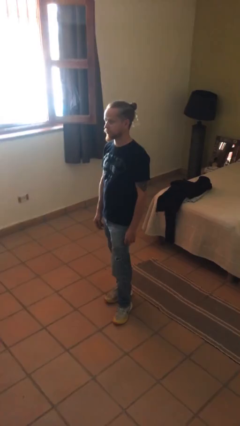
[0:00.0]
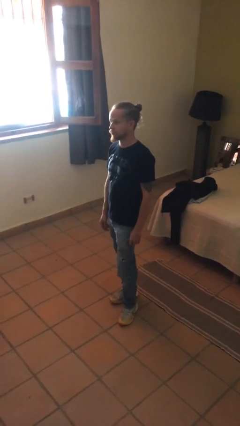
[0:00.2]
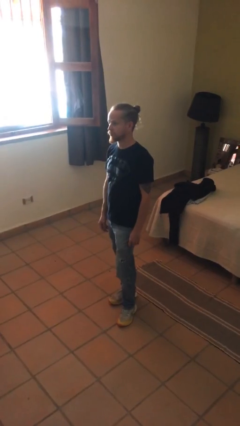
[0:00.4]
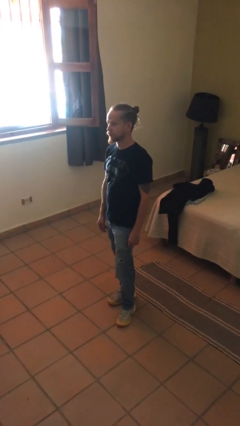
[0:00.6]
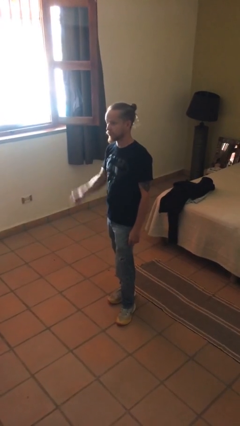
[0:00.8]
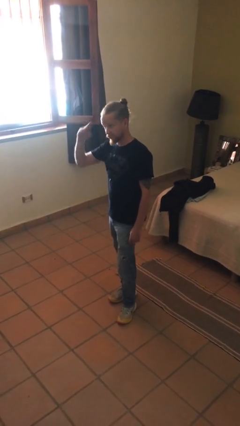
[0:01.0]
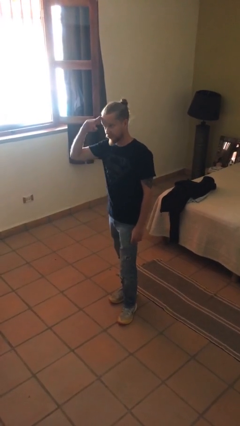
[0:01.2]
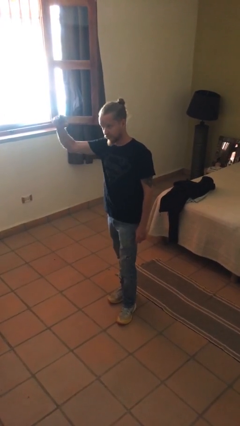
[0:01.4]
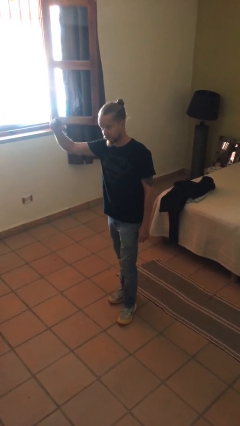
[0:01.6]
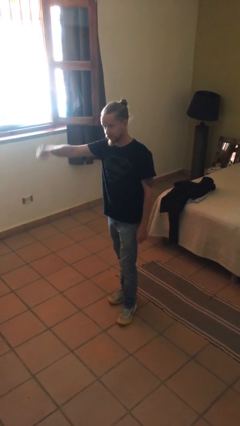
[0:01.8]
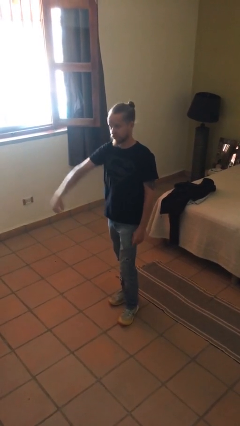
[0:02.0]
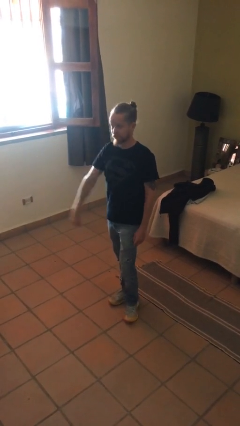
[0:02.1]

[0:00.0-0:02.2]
person salutes

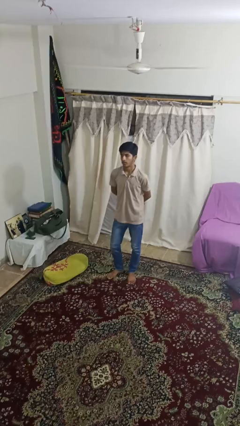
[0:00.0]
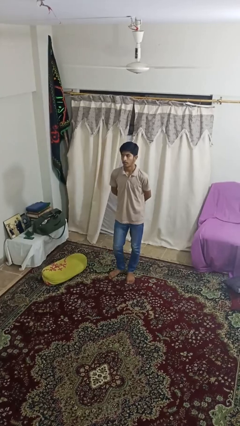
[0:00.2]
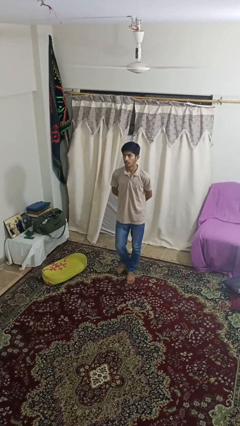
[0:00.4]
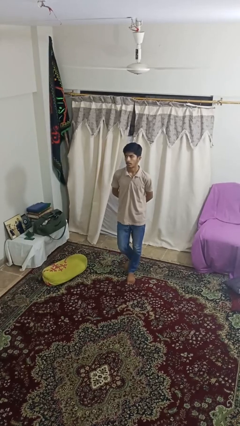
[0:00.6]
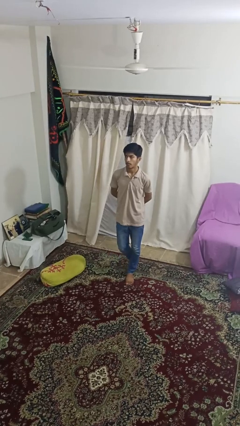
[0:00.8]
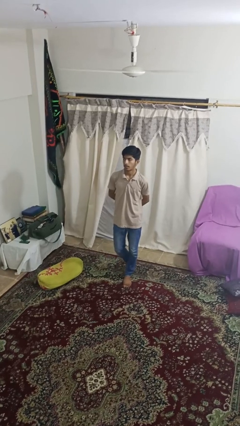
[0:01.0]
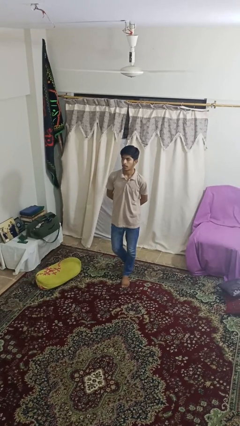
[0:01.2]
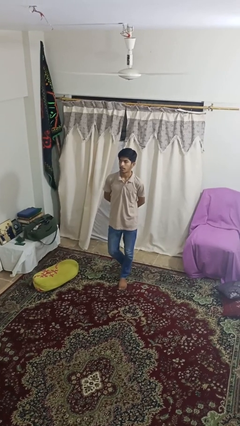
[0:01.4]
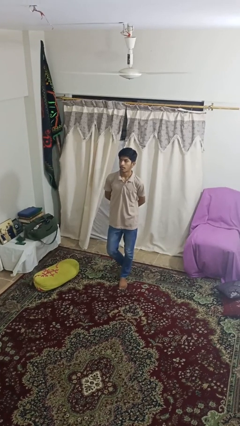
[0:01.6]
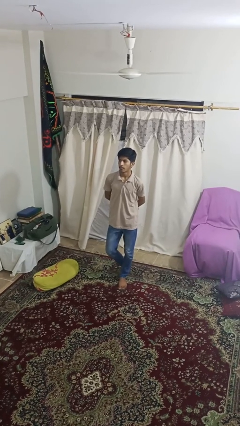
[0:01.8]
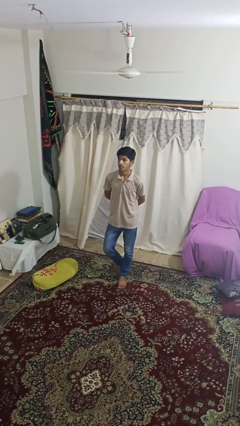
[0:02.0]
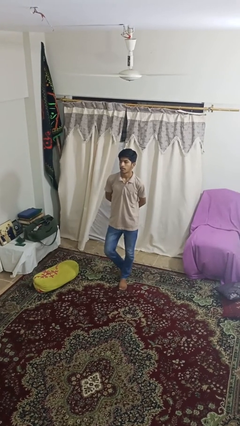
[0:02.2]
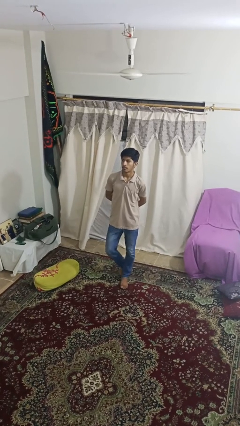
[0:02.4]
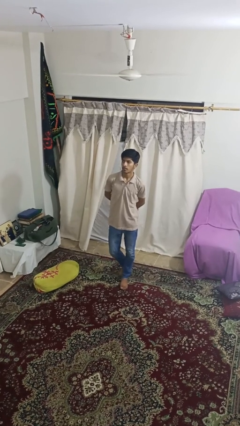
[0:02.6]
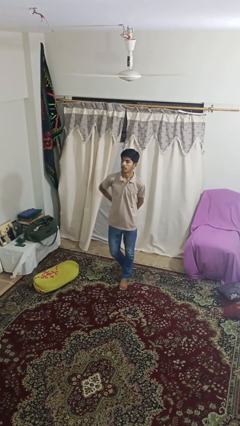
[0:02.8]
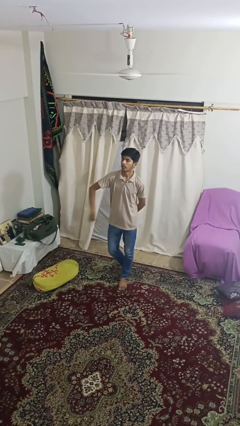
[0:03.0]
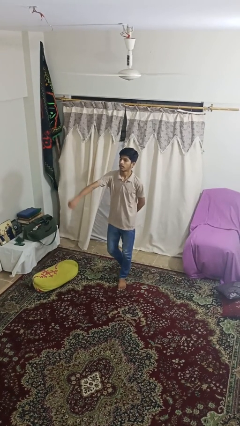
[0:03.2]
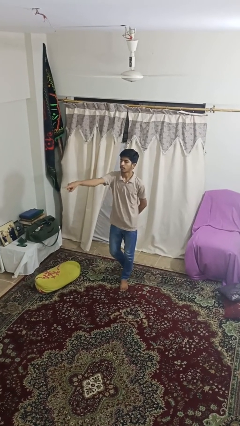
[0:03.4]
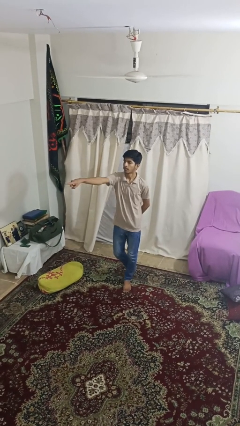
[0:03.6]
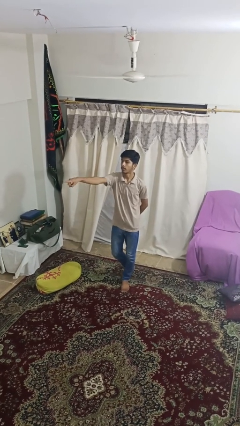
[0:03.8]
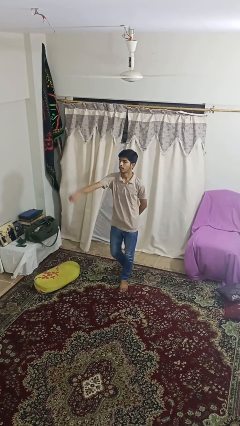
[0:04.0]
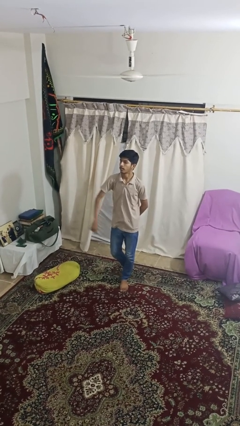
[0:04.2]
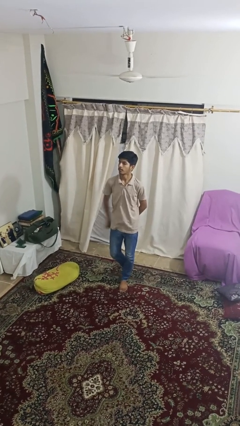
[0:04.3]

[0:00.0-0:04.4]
person points at person

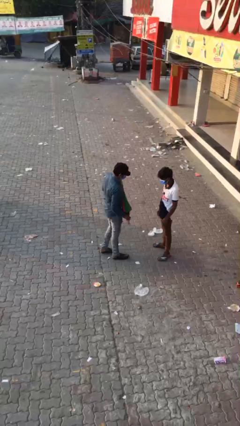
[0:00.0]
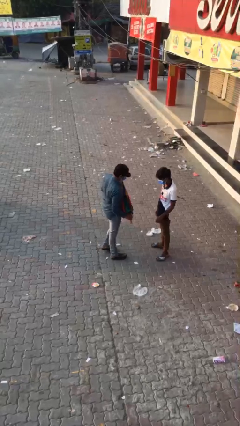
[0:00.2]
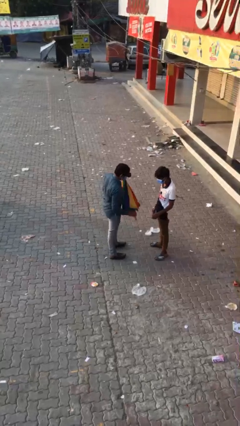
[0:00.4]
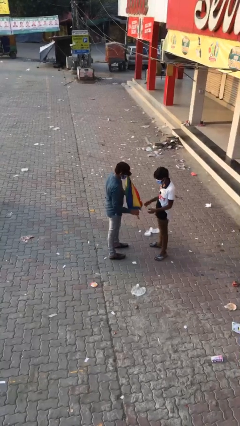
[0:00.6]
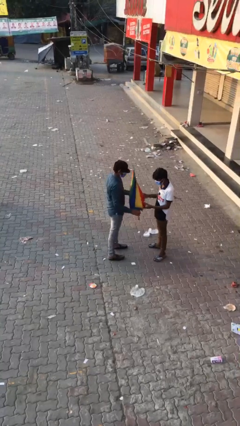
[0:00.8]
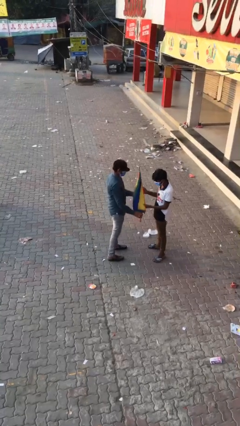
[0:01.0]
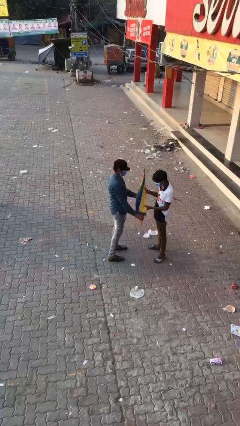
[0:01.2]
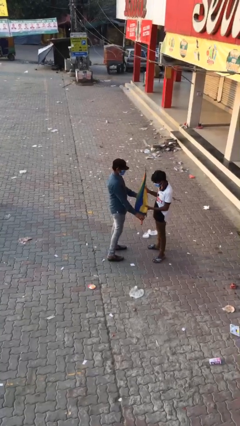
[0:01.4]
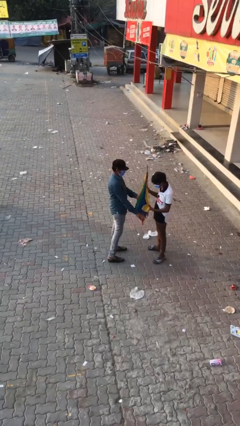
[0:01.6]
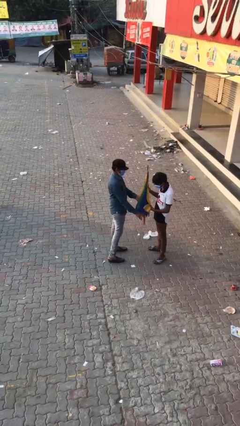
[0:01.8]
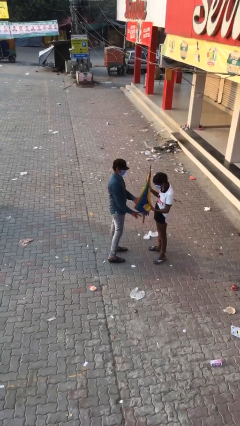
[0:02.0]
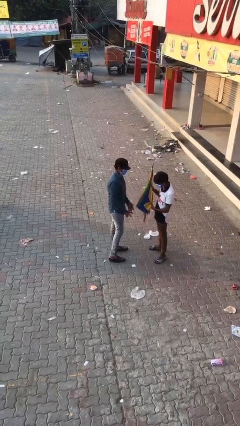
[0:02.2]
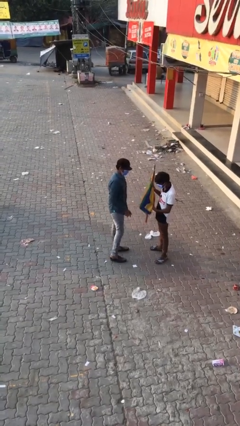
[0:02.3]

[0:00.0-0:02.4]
person transfers object to person

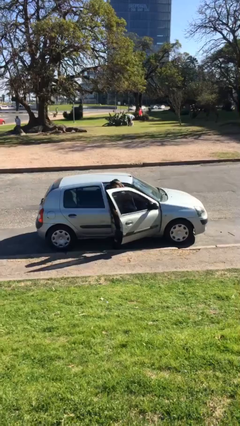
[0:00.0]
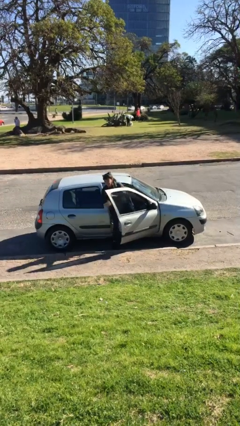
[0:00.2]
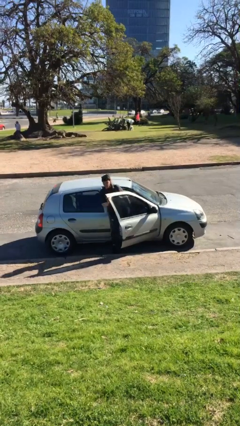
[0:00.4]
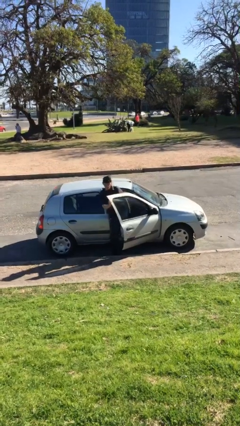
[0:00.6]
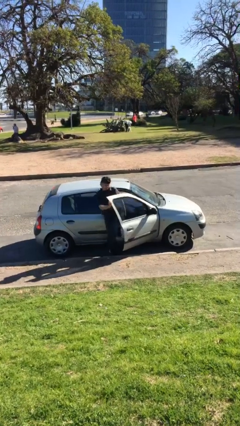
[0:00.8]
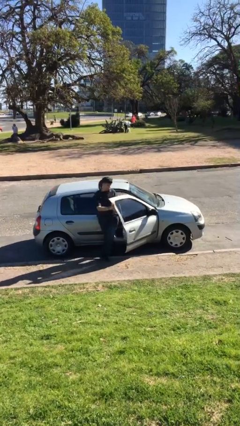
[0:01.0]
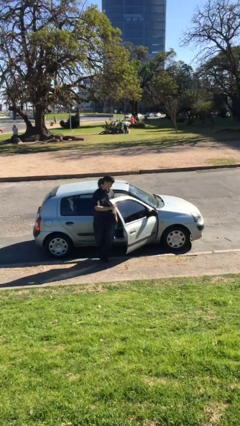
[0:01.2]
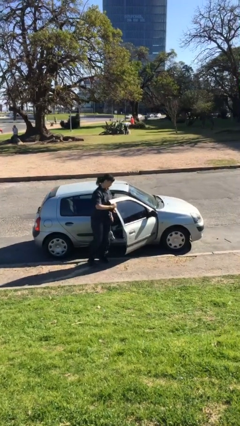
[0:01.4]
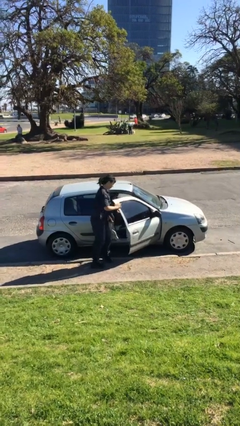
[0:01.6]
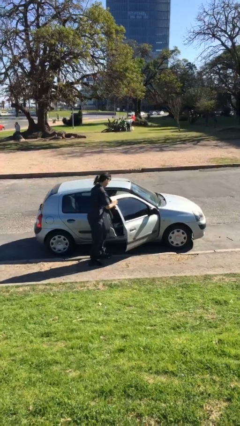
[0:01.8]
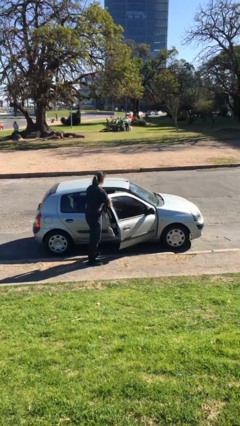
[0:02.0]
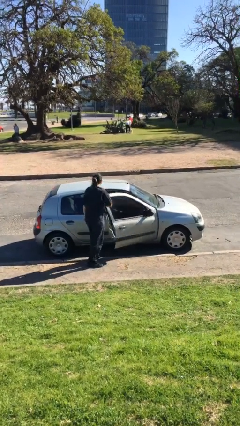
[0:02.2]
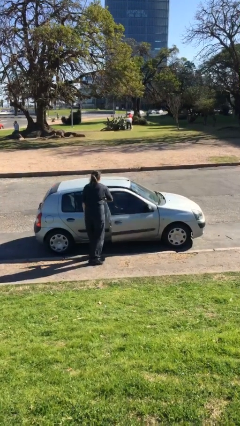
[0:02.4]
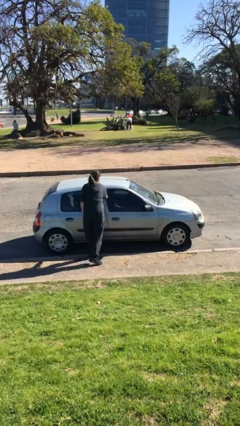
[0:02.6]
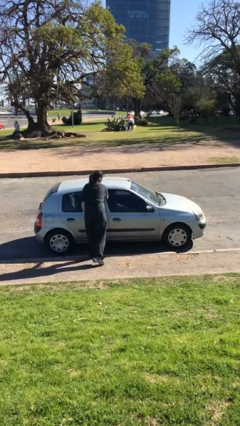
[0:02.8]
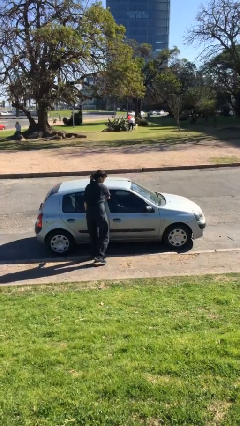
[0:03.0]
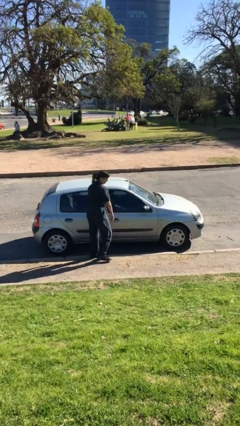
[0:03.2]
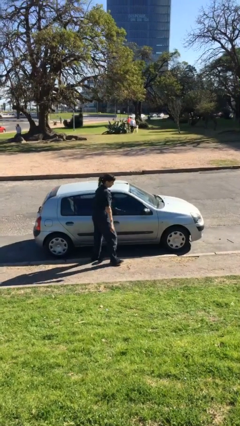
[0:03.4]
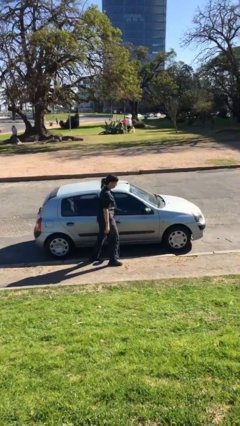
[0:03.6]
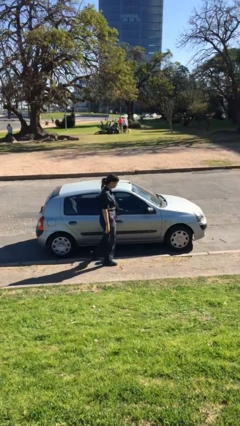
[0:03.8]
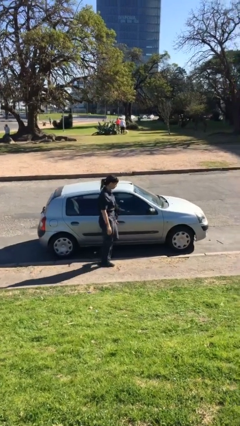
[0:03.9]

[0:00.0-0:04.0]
car drops off person

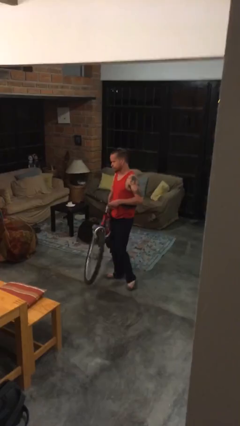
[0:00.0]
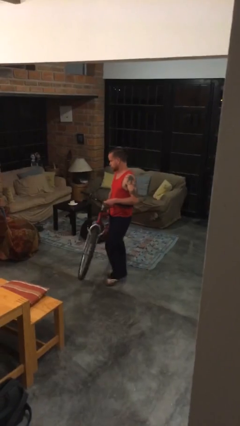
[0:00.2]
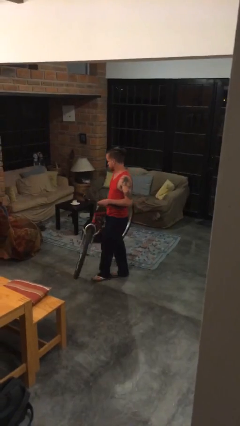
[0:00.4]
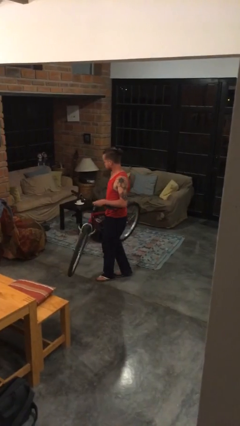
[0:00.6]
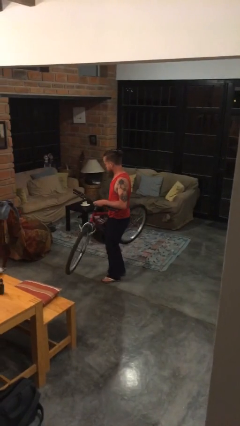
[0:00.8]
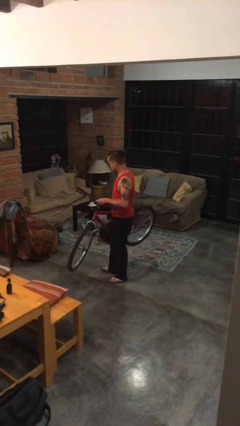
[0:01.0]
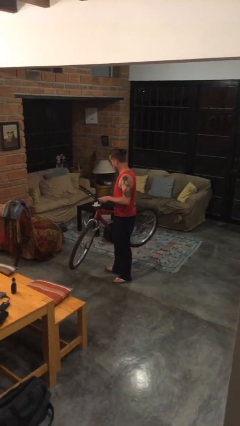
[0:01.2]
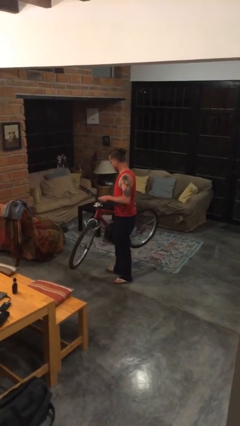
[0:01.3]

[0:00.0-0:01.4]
person carries bicycle

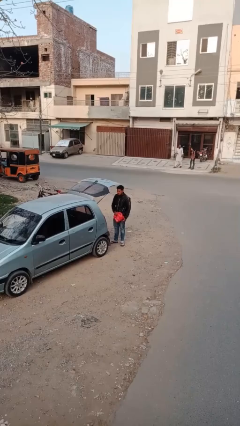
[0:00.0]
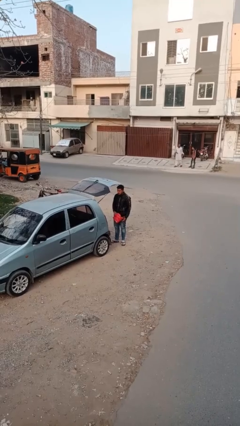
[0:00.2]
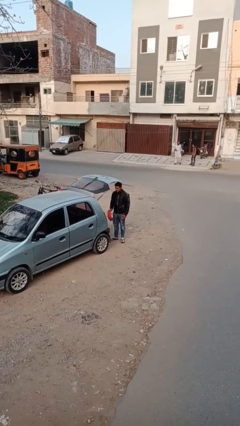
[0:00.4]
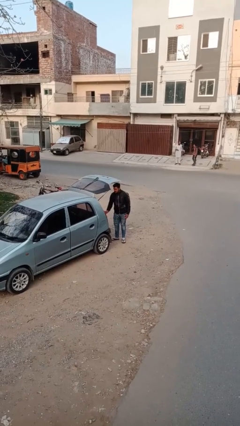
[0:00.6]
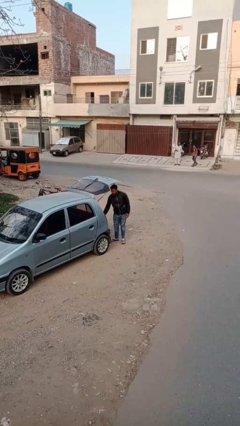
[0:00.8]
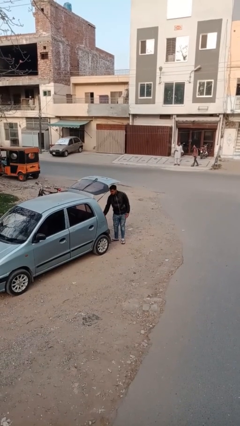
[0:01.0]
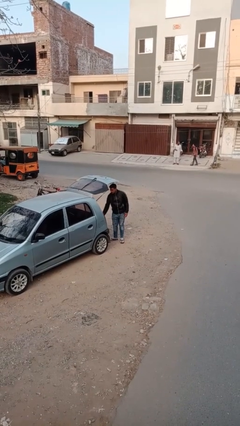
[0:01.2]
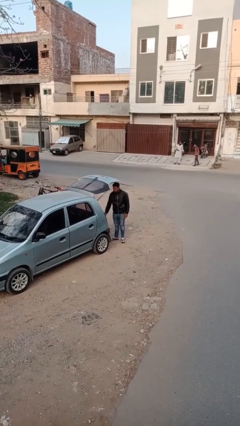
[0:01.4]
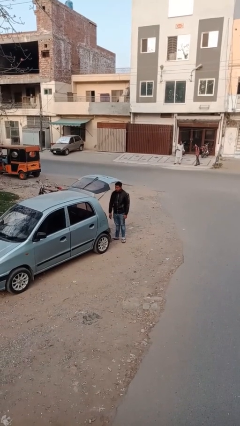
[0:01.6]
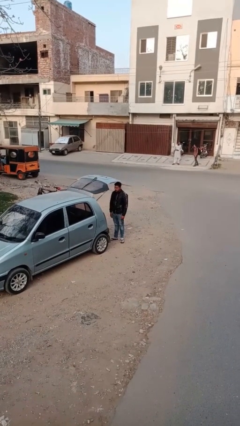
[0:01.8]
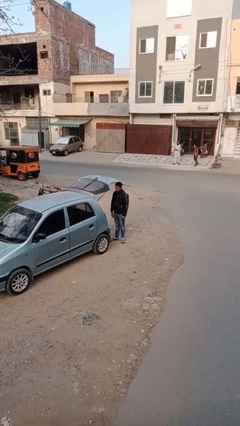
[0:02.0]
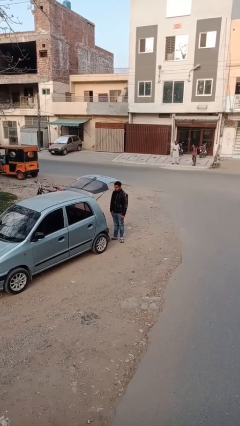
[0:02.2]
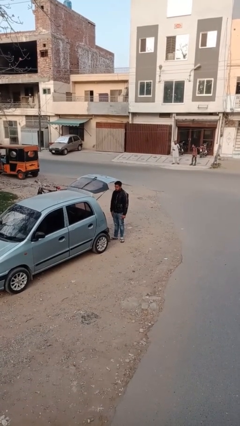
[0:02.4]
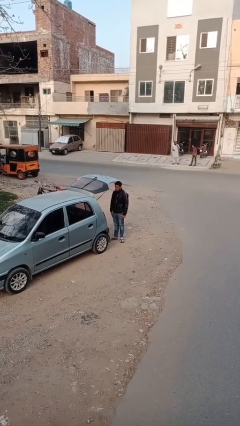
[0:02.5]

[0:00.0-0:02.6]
person loads car
